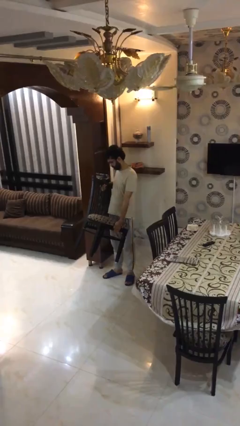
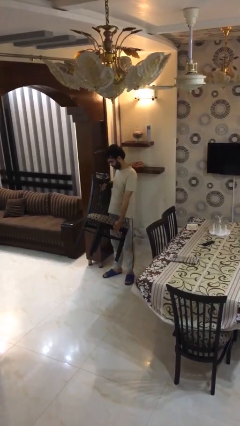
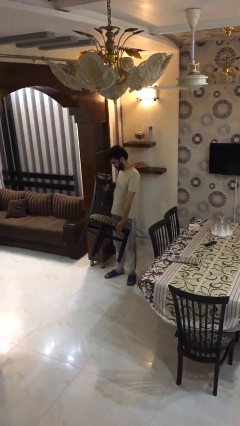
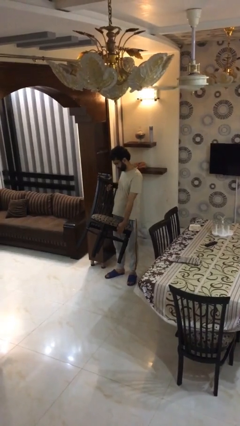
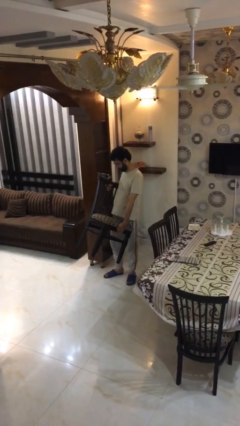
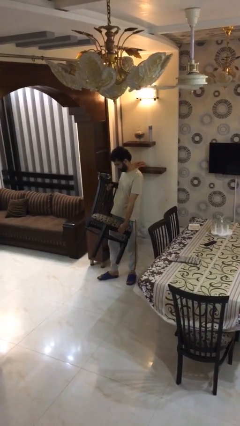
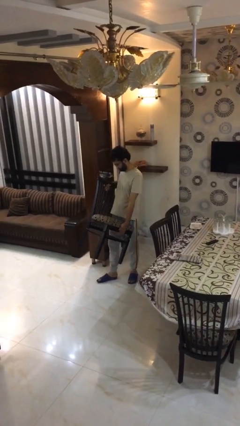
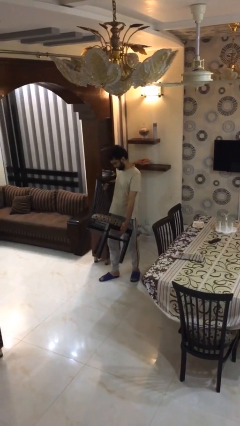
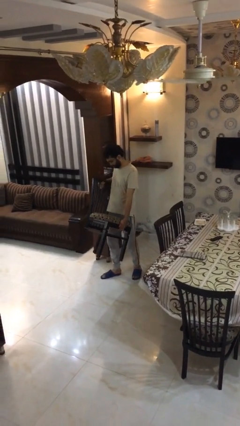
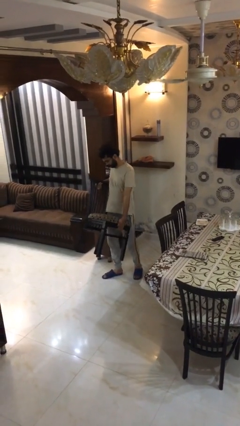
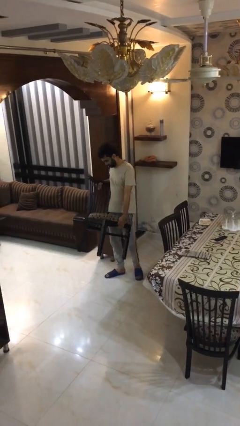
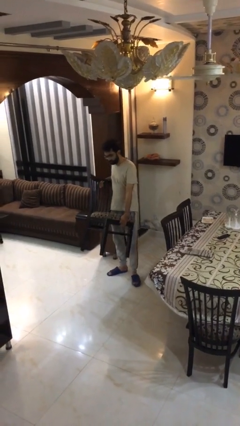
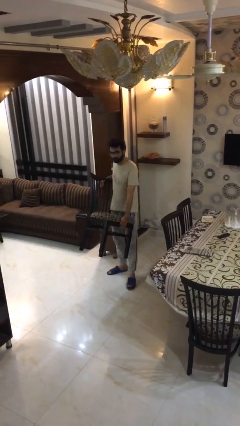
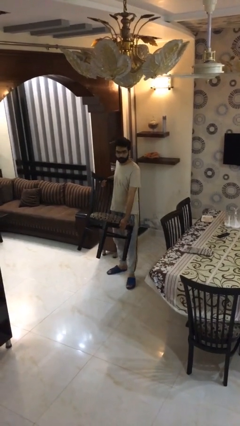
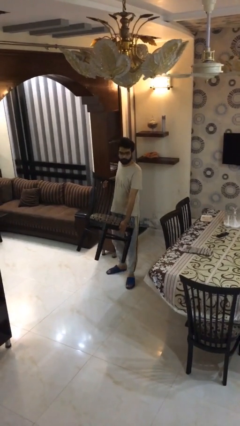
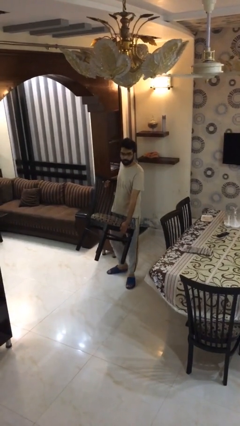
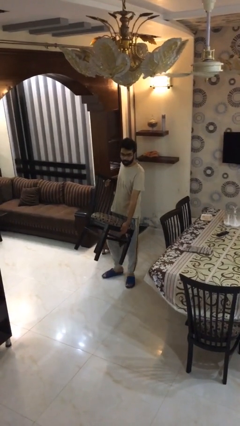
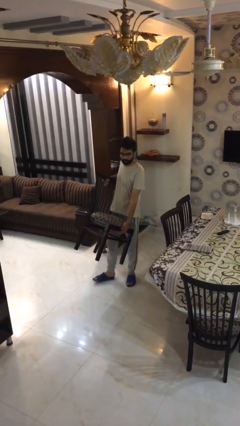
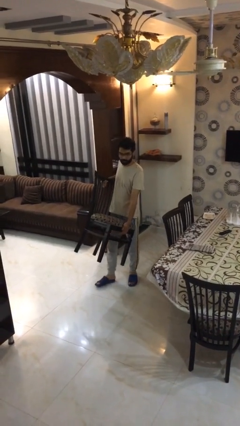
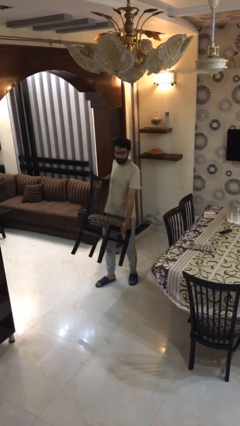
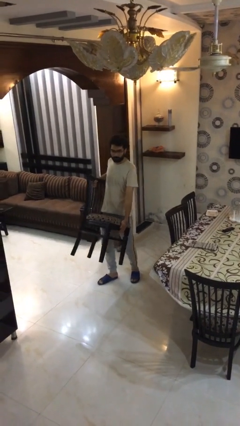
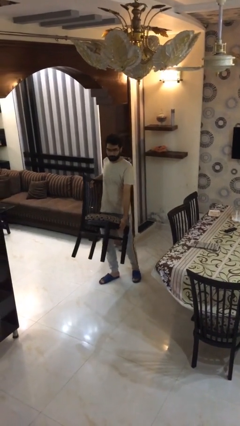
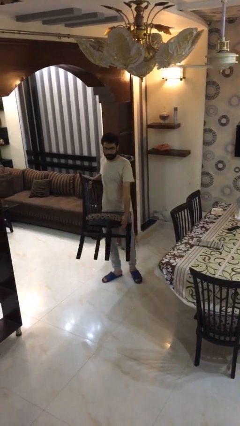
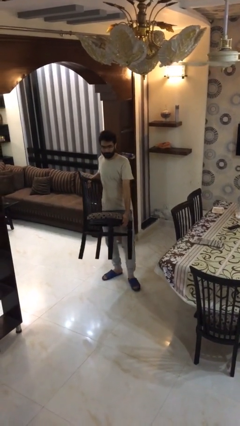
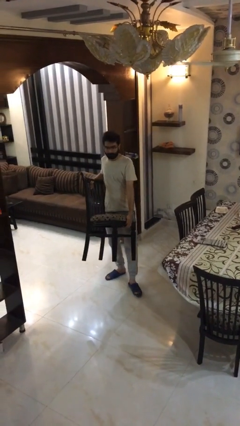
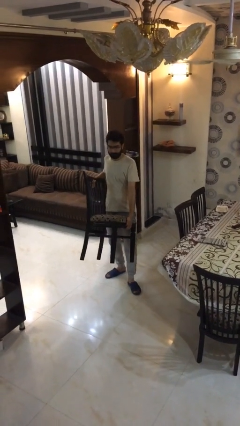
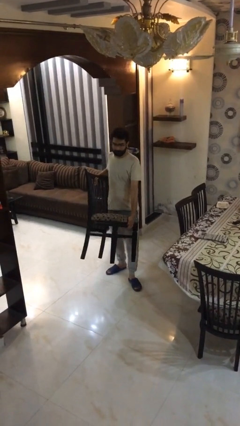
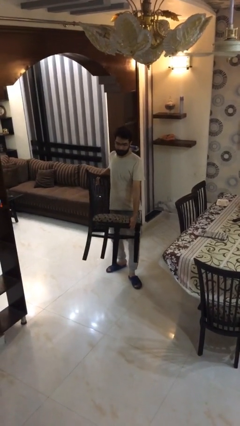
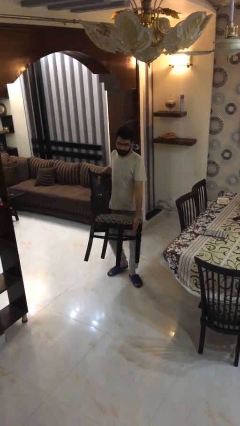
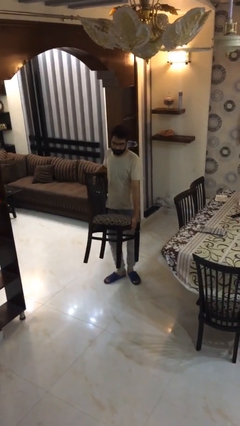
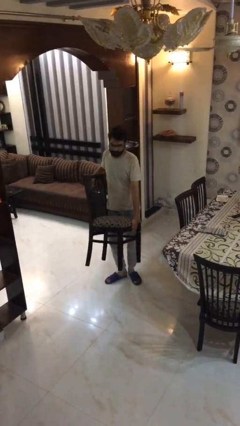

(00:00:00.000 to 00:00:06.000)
person carries heavy object

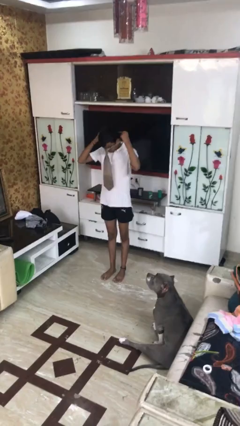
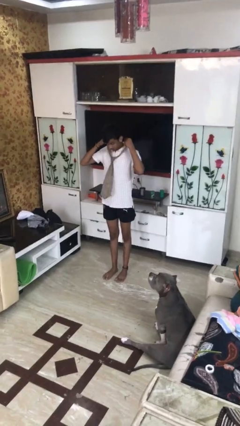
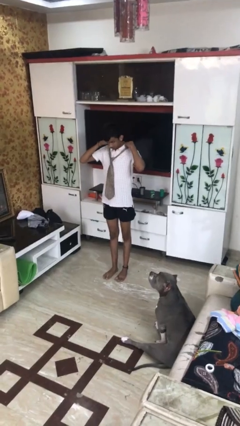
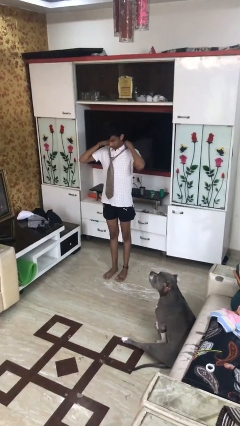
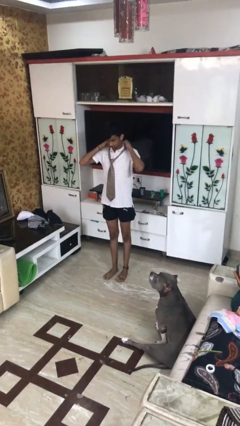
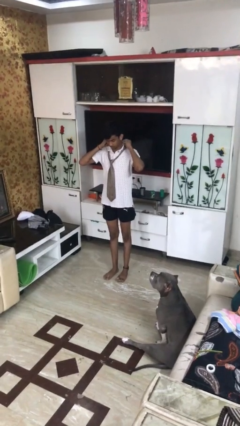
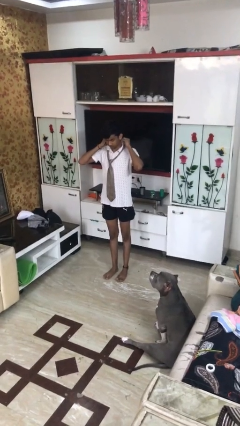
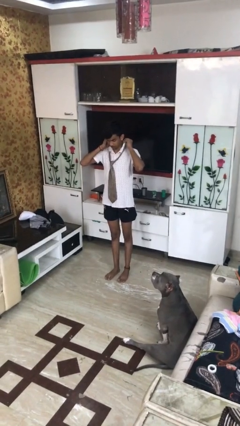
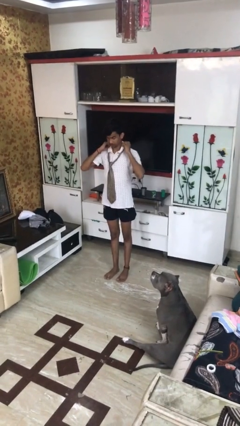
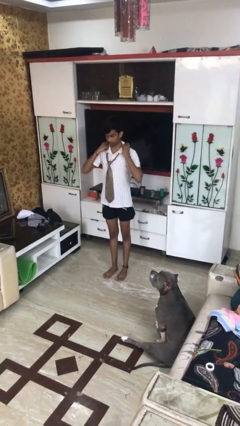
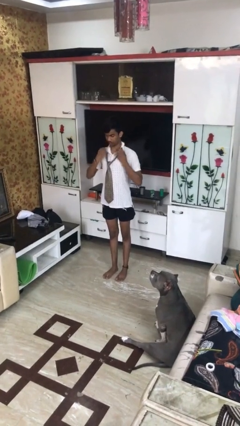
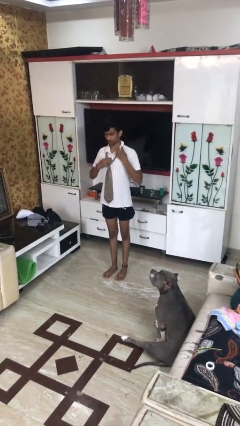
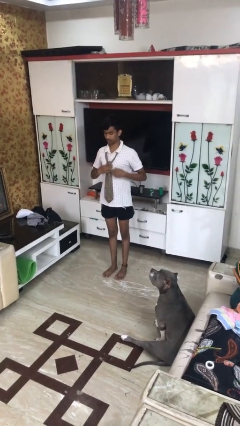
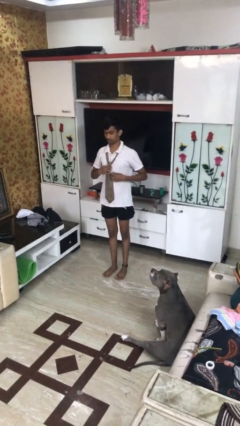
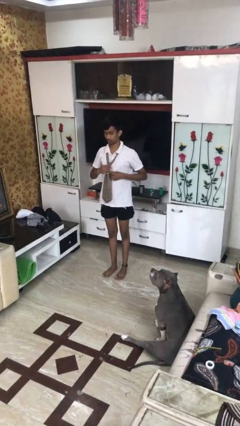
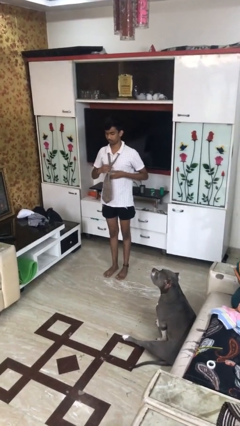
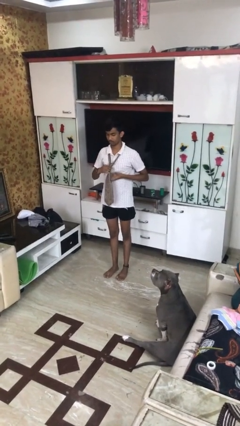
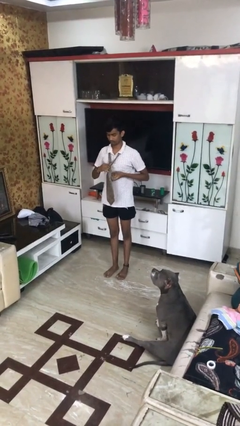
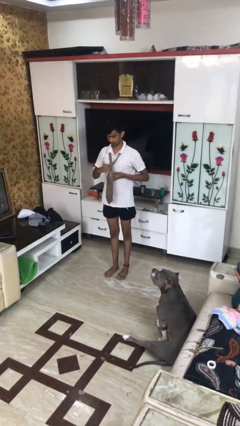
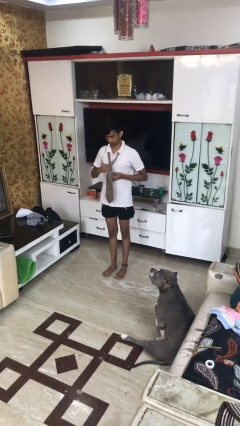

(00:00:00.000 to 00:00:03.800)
person puts on necktie

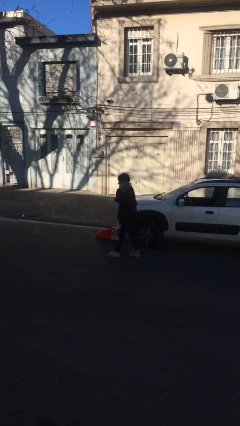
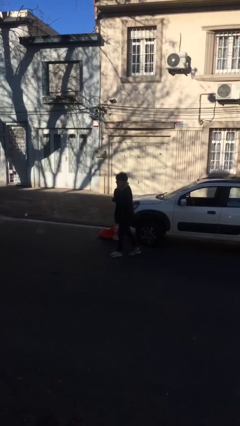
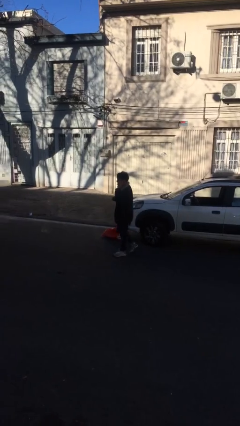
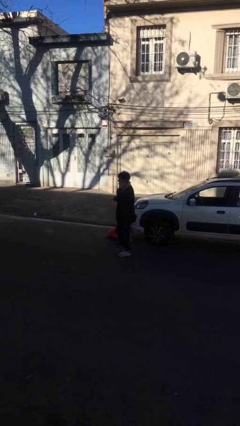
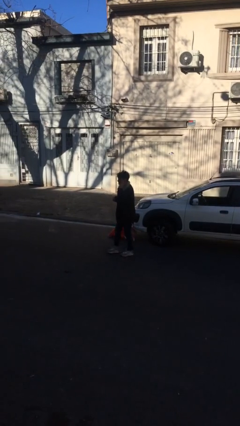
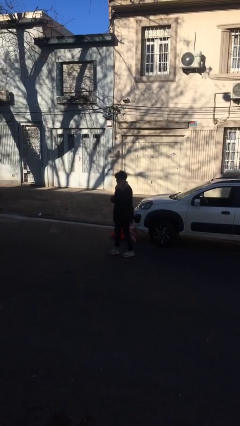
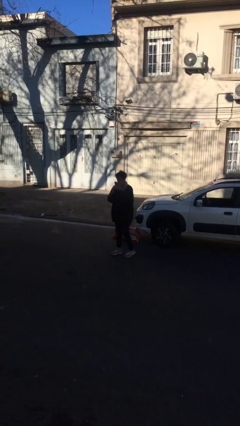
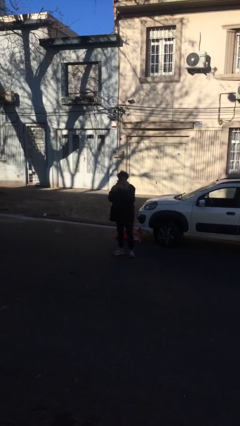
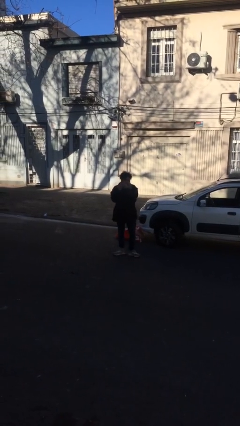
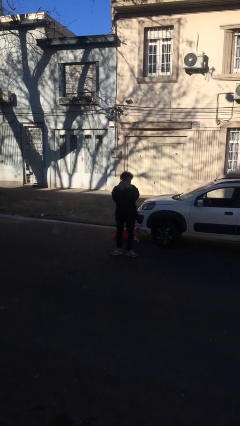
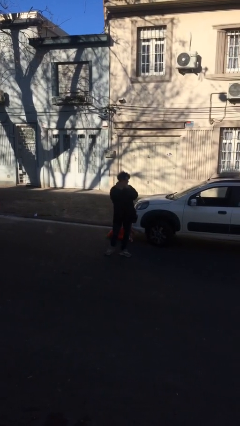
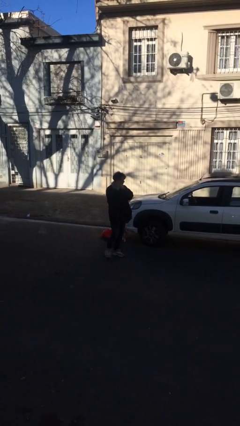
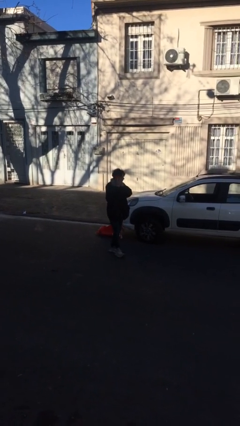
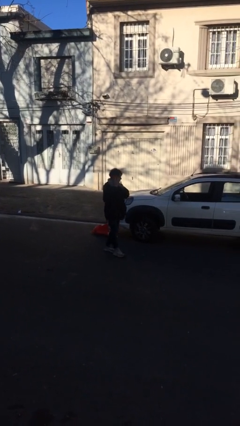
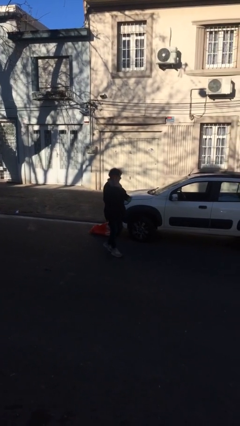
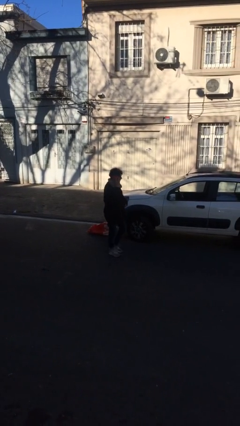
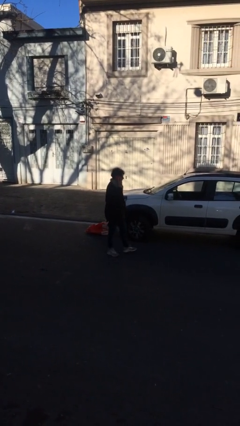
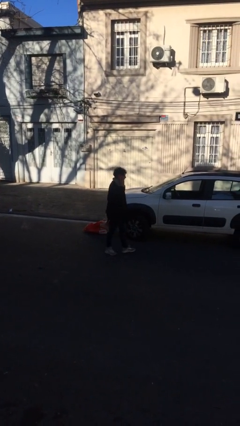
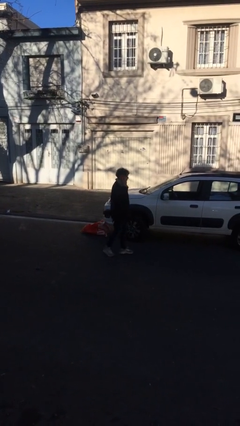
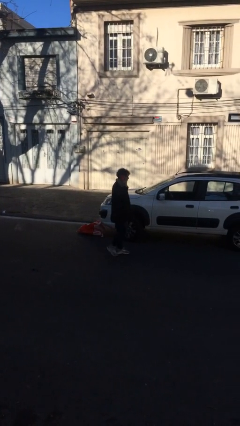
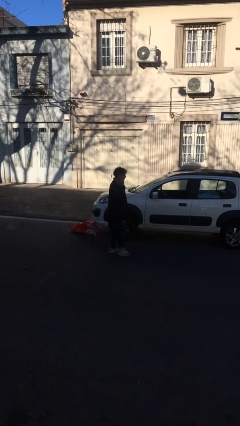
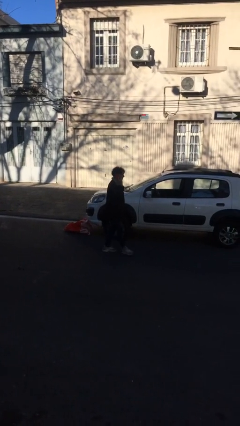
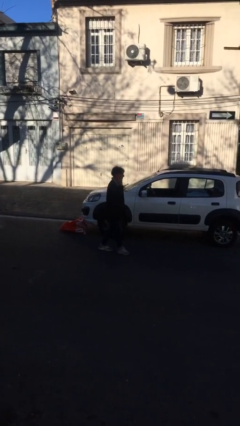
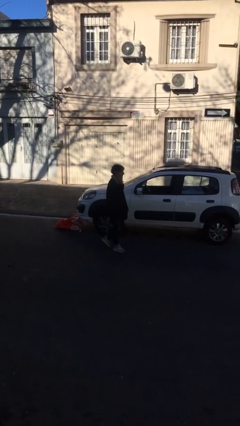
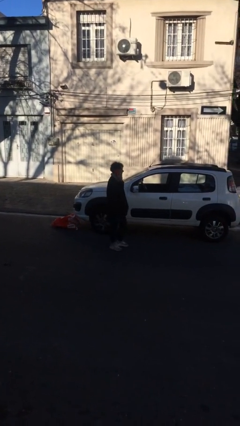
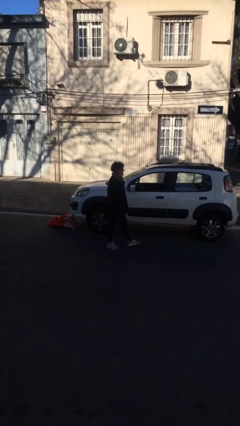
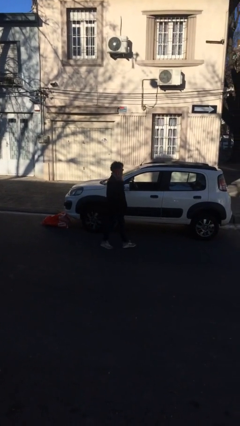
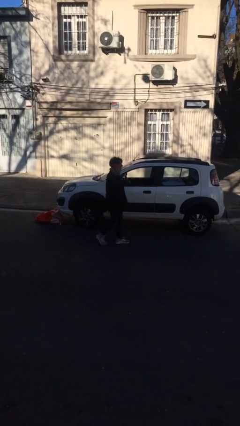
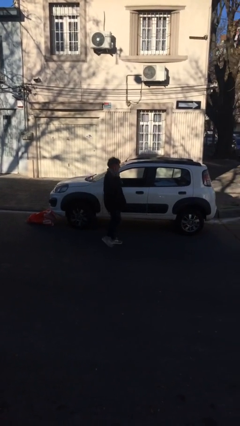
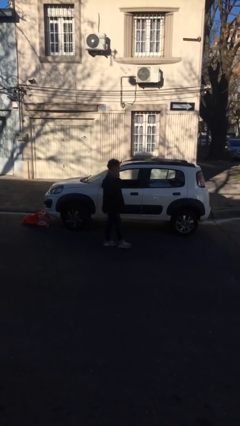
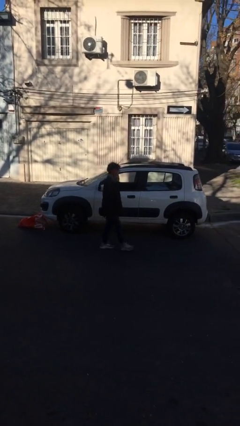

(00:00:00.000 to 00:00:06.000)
person talks on phone

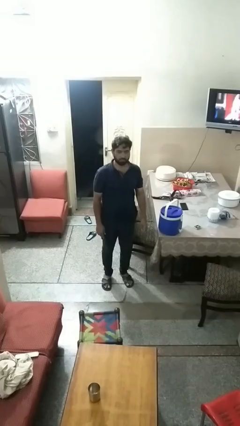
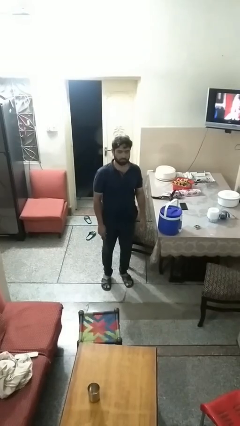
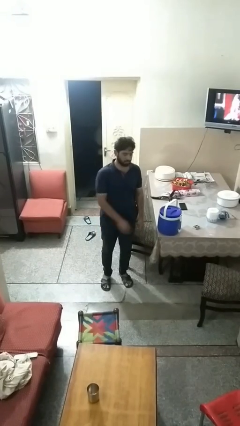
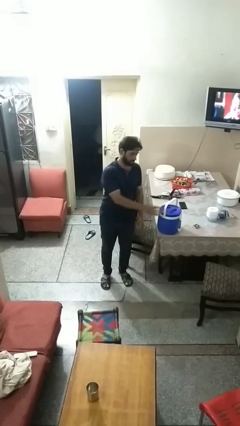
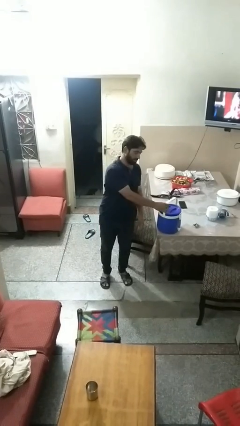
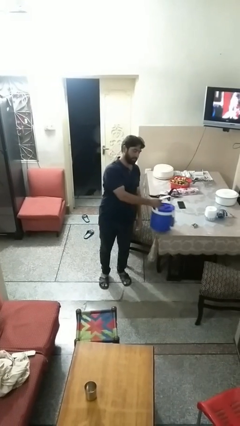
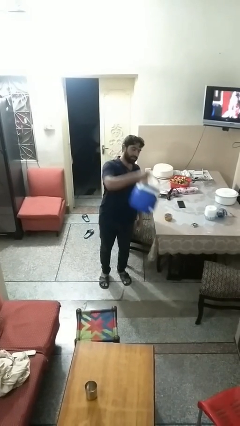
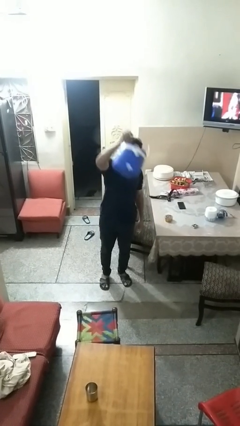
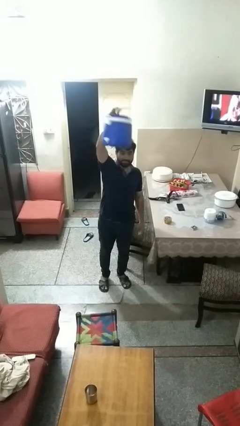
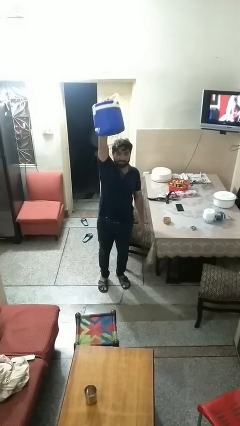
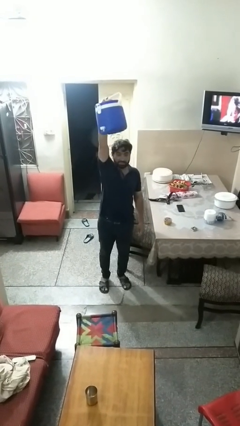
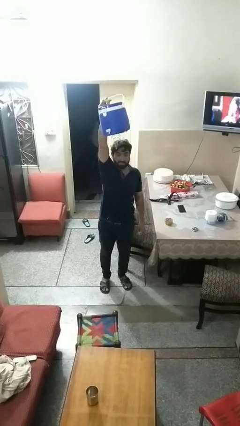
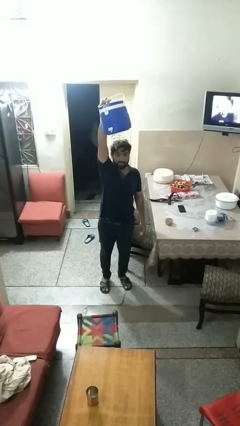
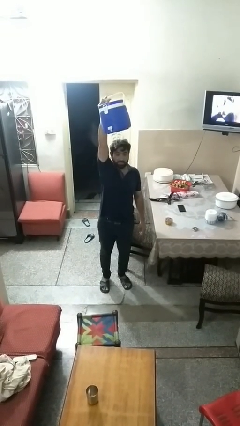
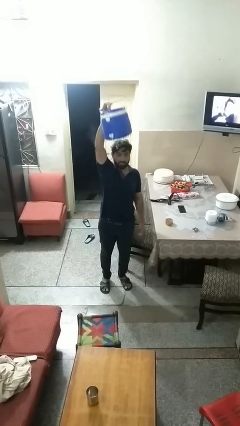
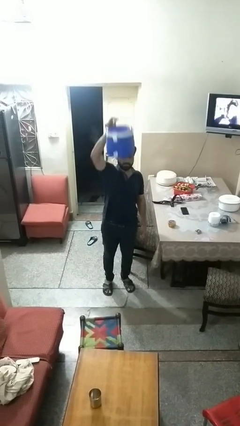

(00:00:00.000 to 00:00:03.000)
person holds object above head
